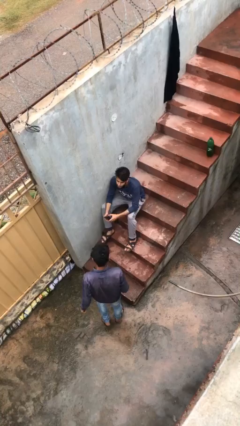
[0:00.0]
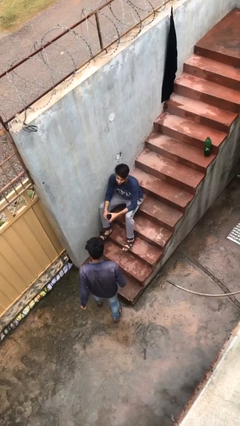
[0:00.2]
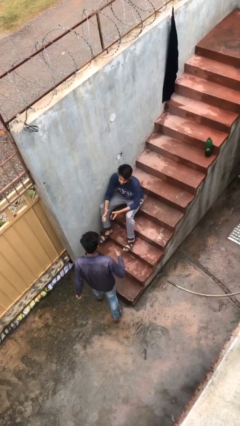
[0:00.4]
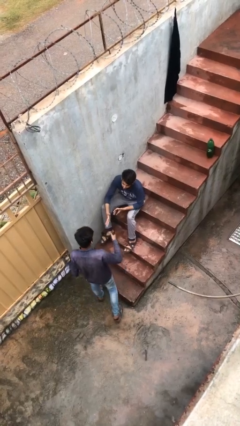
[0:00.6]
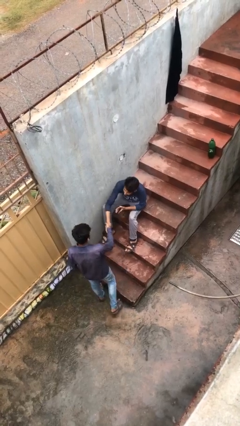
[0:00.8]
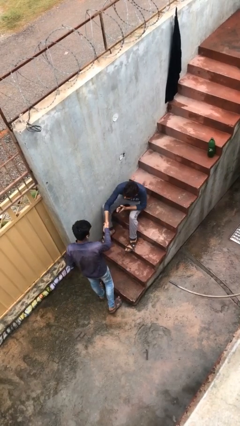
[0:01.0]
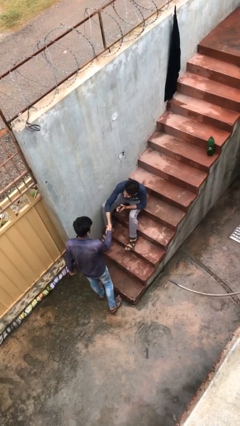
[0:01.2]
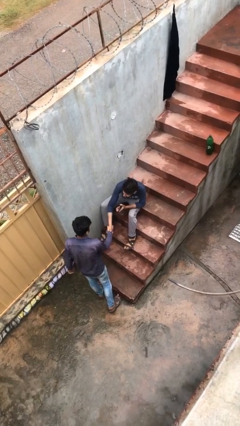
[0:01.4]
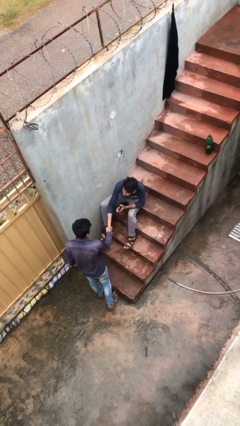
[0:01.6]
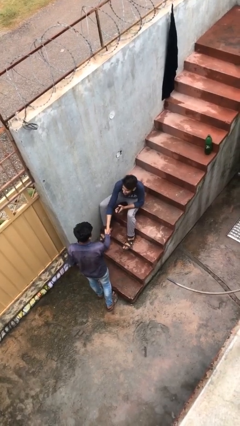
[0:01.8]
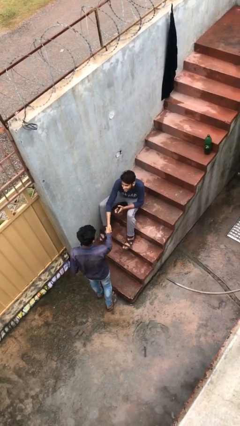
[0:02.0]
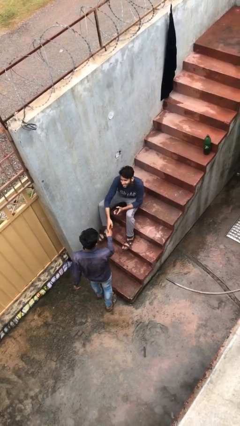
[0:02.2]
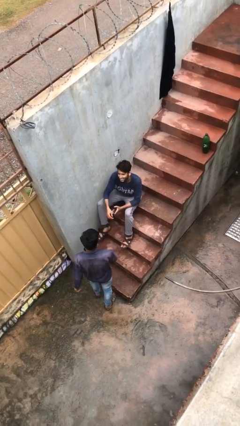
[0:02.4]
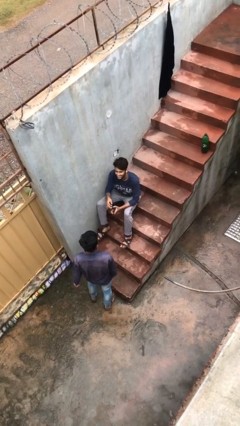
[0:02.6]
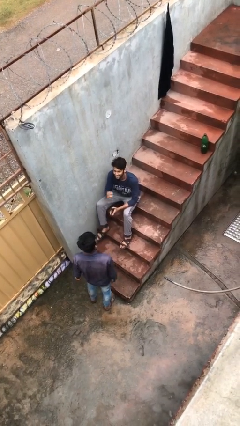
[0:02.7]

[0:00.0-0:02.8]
person shakes hand

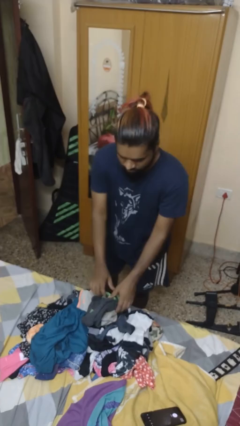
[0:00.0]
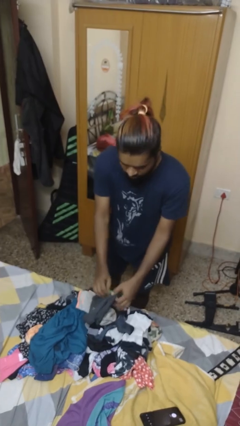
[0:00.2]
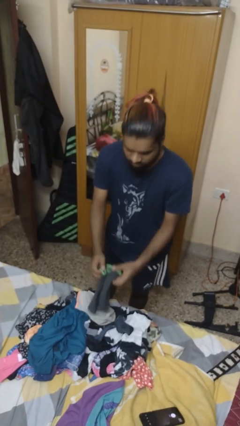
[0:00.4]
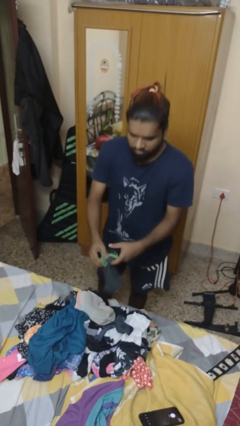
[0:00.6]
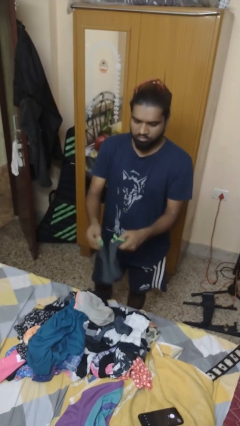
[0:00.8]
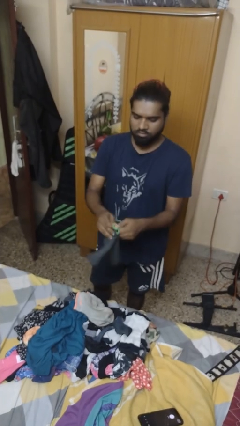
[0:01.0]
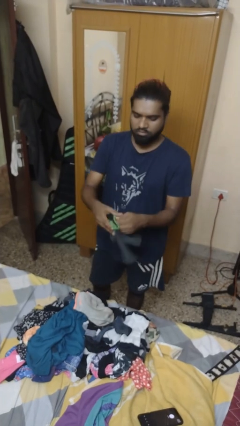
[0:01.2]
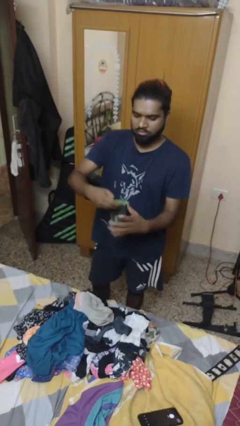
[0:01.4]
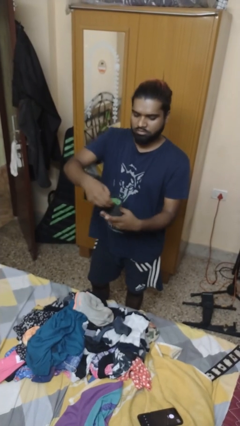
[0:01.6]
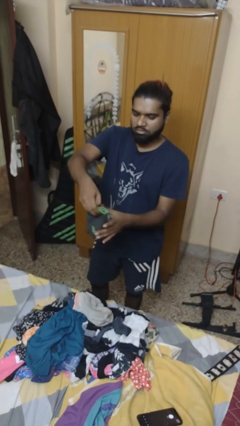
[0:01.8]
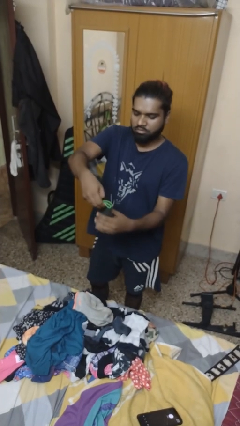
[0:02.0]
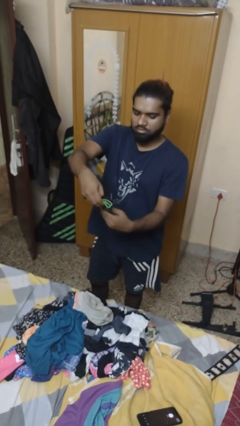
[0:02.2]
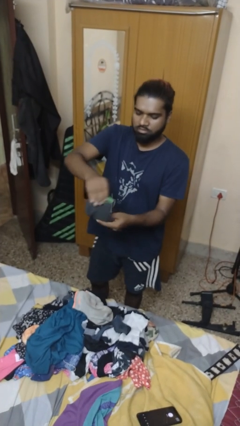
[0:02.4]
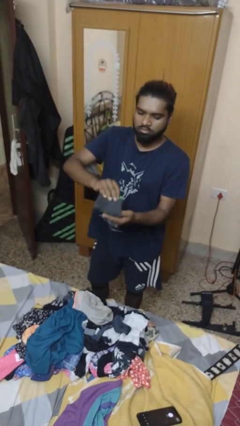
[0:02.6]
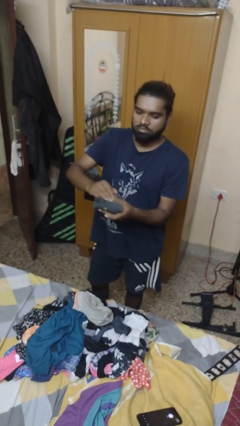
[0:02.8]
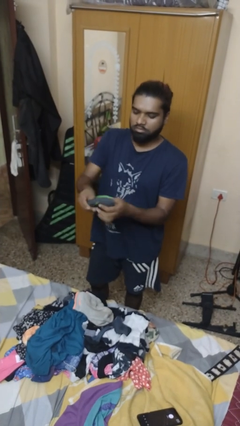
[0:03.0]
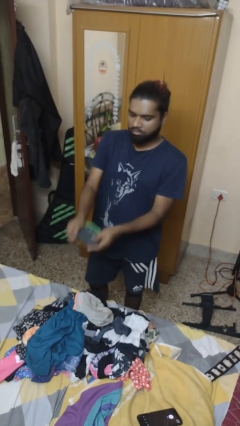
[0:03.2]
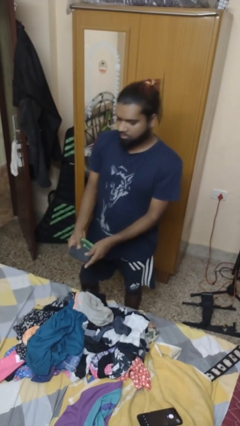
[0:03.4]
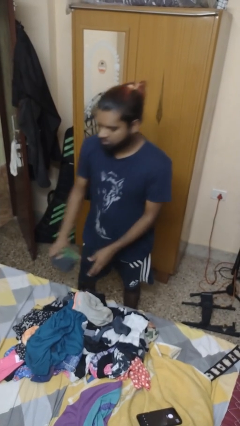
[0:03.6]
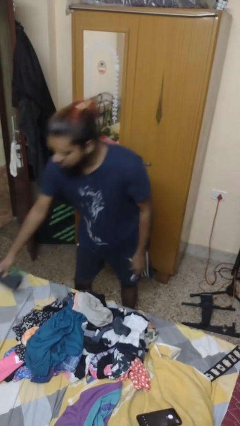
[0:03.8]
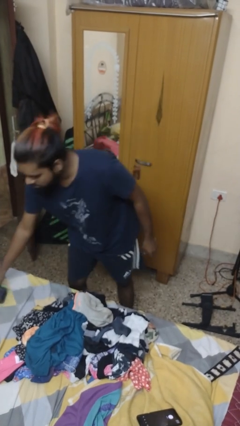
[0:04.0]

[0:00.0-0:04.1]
person folds socks

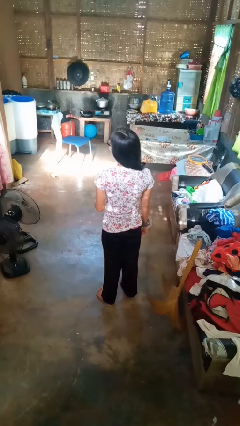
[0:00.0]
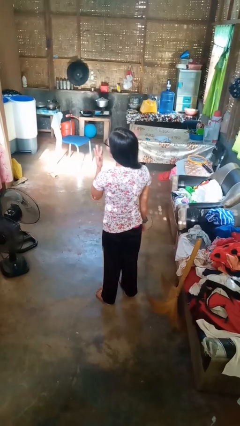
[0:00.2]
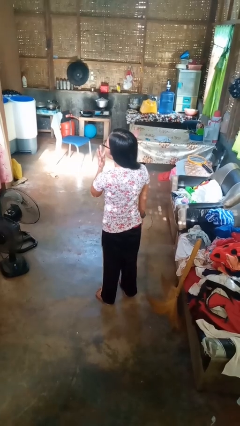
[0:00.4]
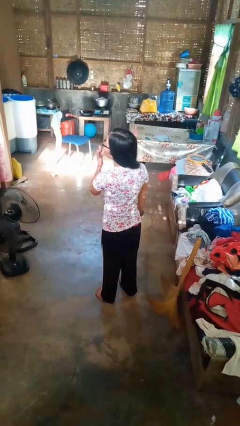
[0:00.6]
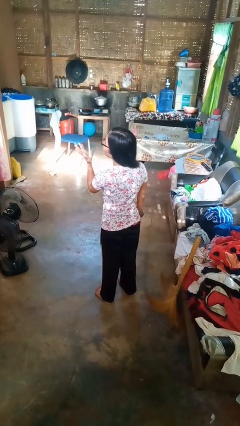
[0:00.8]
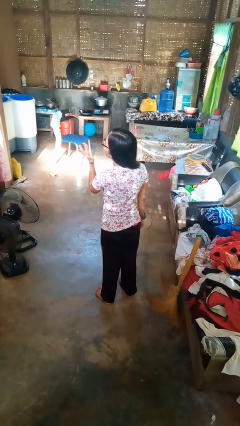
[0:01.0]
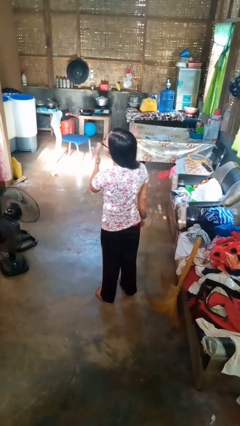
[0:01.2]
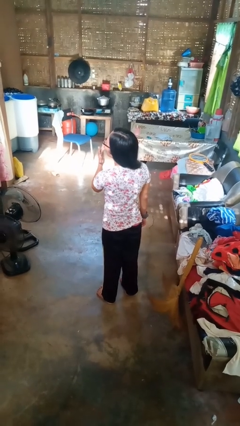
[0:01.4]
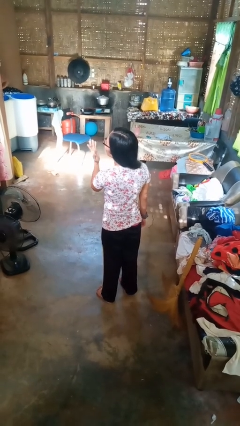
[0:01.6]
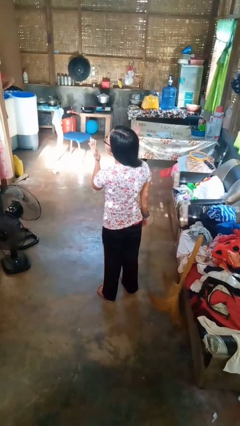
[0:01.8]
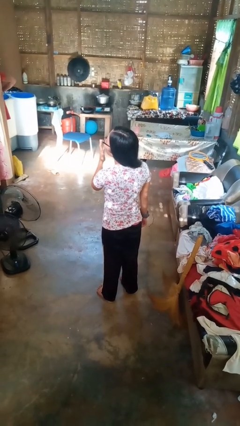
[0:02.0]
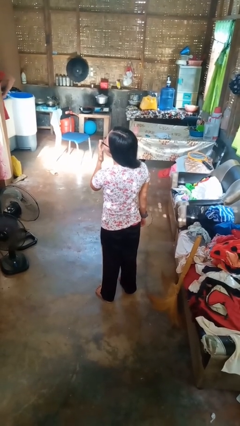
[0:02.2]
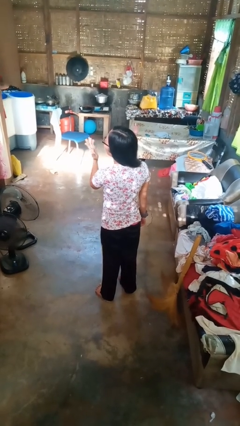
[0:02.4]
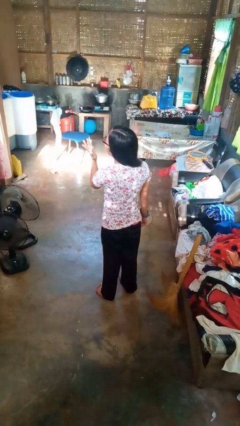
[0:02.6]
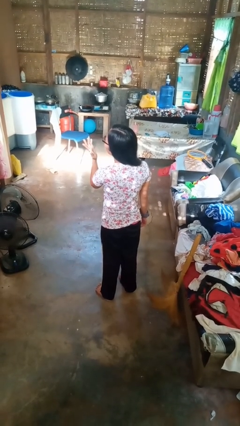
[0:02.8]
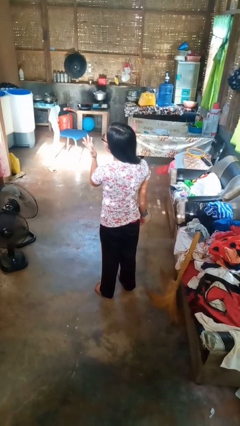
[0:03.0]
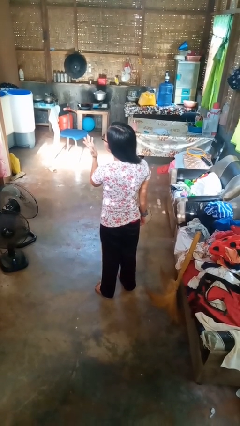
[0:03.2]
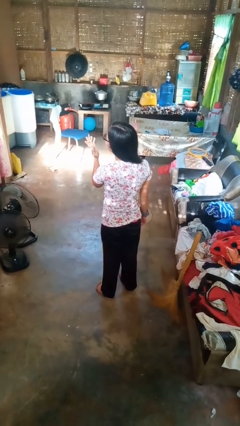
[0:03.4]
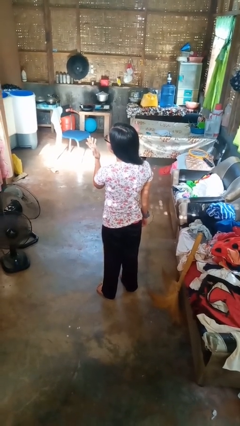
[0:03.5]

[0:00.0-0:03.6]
person licks fingers

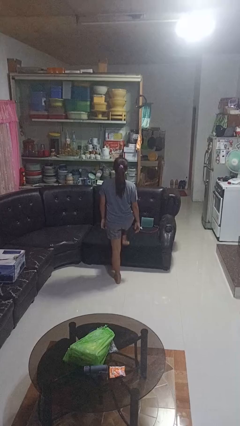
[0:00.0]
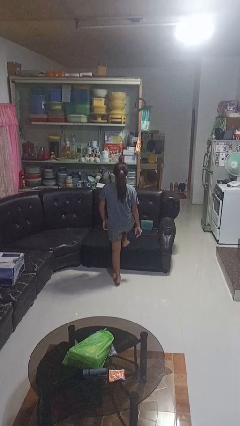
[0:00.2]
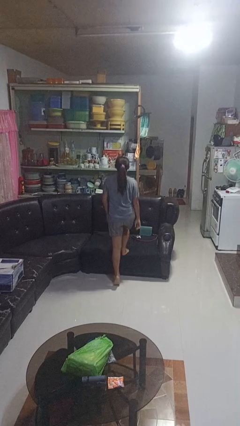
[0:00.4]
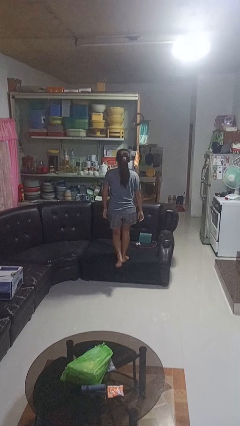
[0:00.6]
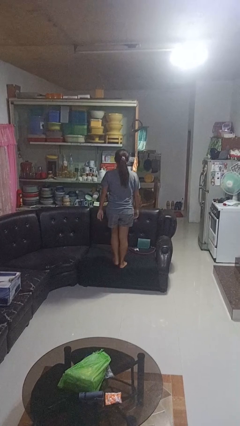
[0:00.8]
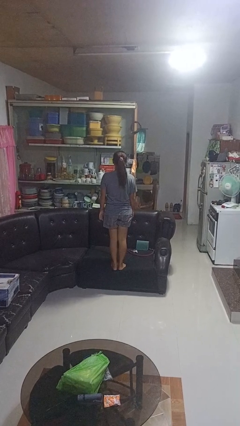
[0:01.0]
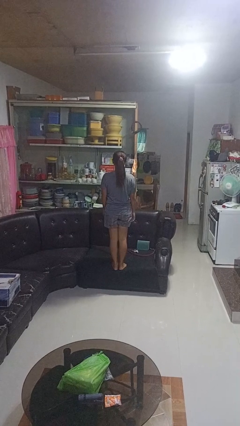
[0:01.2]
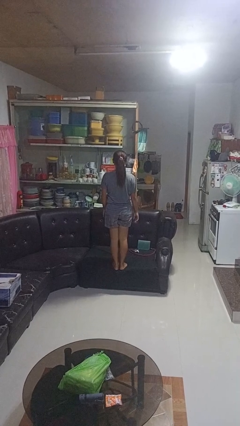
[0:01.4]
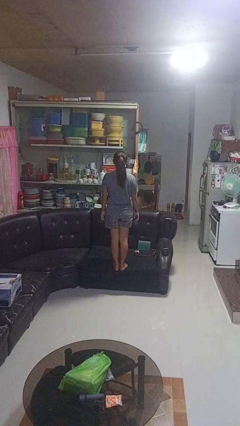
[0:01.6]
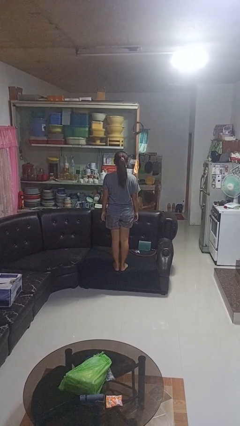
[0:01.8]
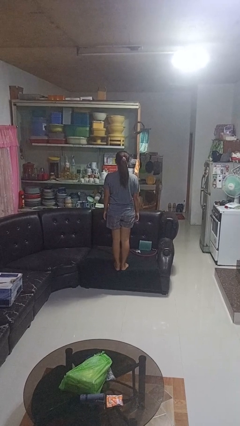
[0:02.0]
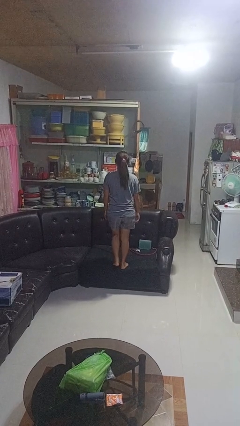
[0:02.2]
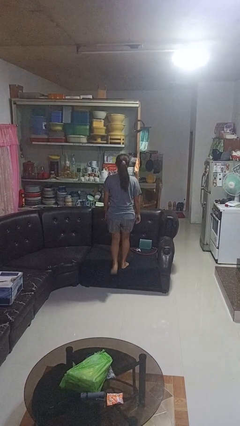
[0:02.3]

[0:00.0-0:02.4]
person climbs on couch

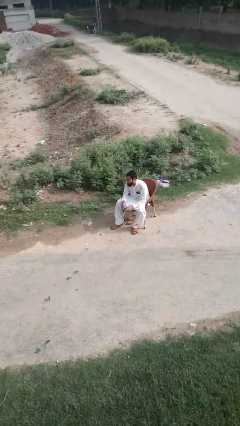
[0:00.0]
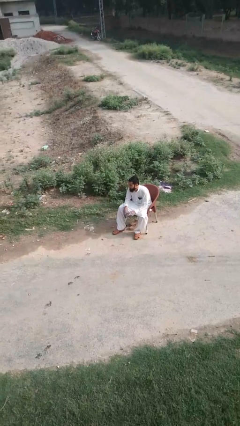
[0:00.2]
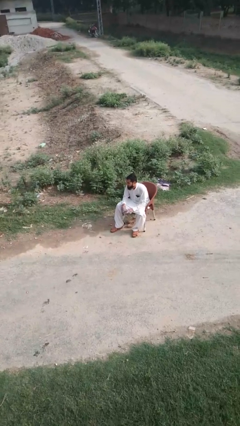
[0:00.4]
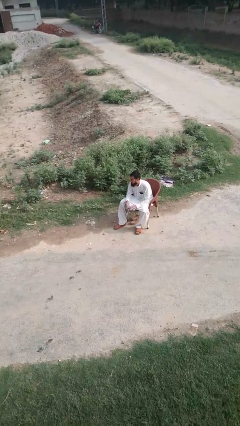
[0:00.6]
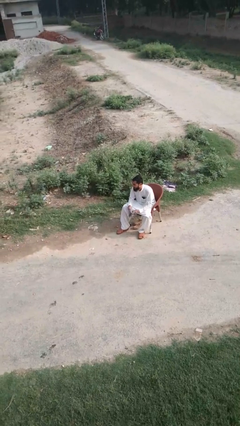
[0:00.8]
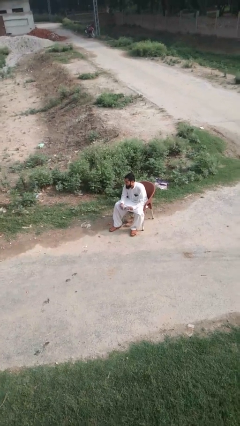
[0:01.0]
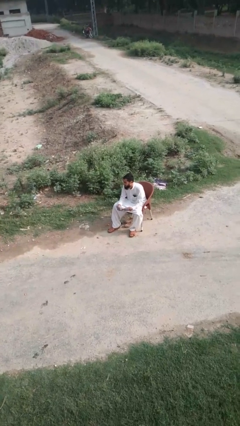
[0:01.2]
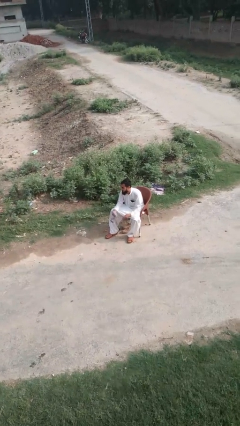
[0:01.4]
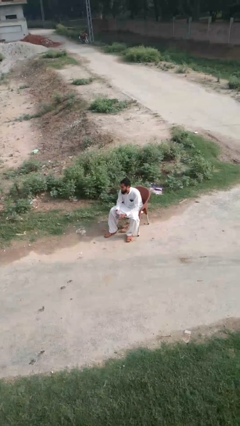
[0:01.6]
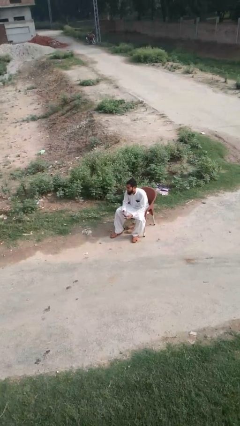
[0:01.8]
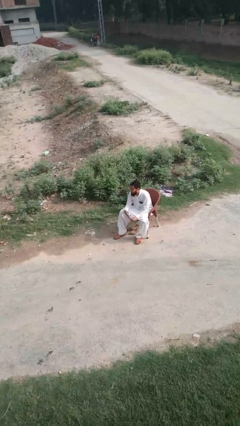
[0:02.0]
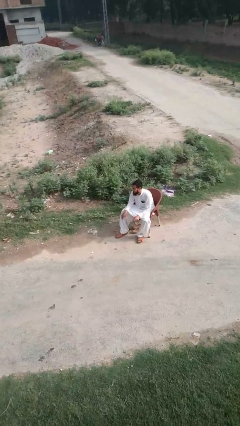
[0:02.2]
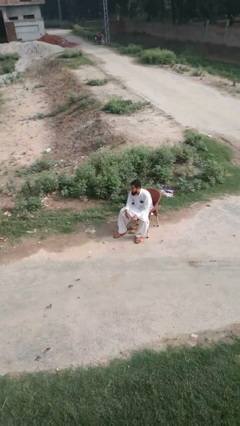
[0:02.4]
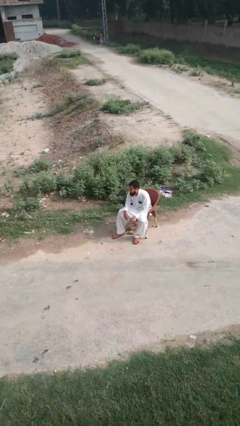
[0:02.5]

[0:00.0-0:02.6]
person takes off gloves

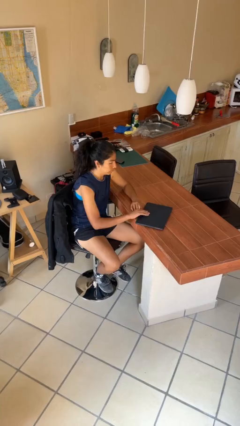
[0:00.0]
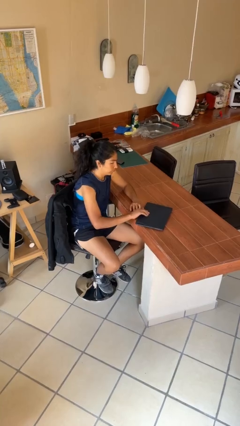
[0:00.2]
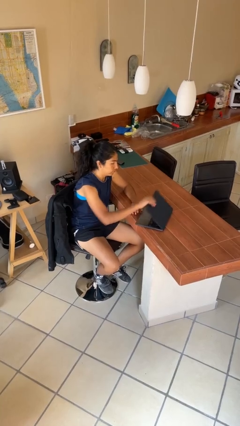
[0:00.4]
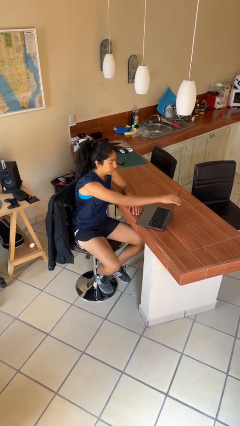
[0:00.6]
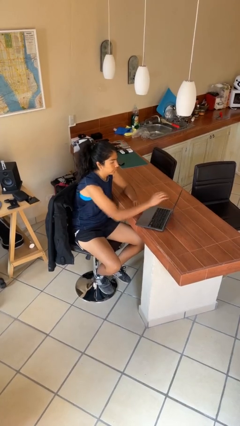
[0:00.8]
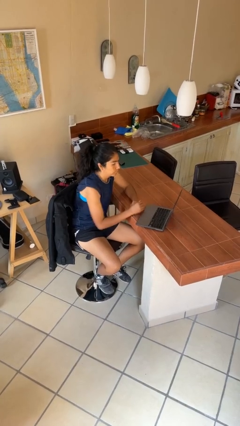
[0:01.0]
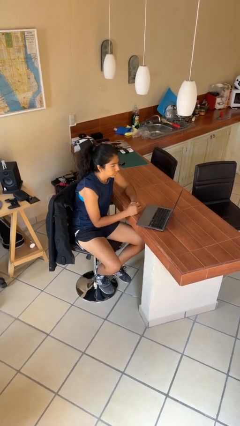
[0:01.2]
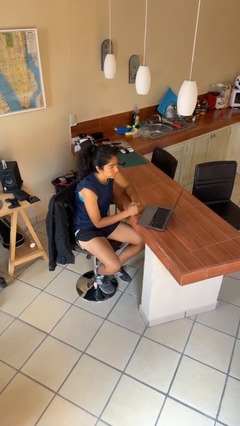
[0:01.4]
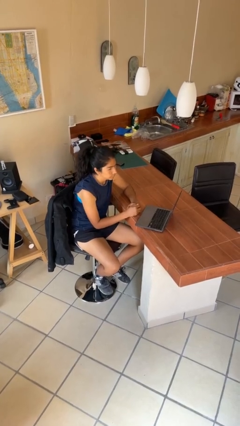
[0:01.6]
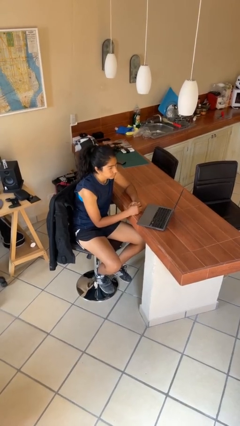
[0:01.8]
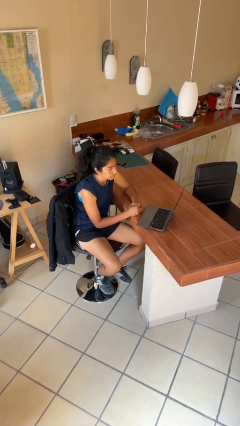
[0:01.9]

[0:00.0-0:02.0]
person opens laptop
